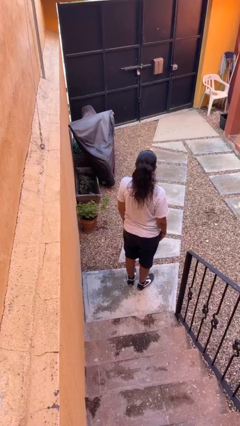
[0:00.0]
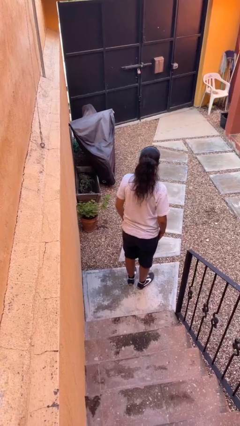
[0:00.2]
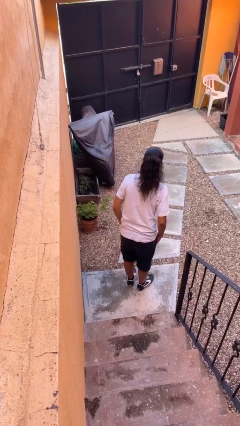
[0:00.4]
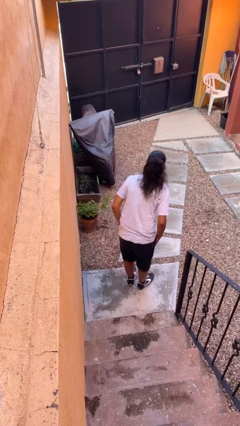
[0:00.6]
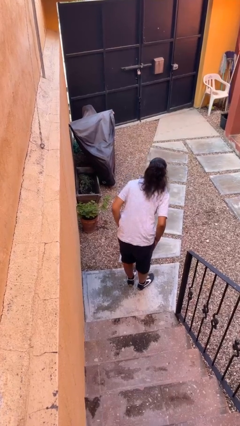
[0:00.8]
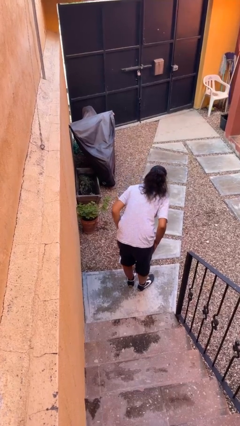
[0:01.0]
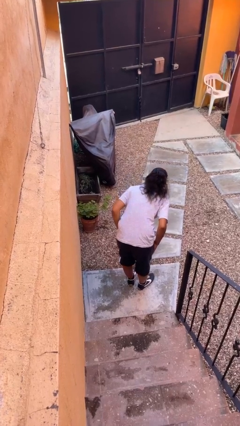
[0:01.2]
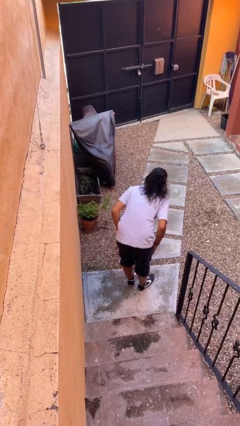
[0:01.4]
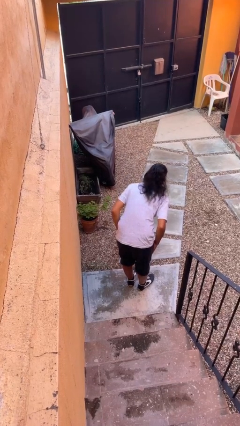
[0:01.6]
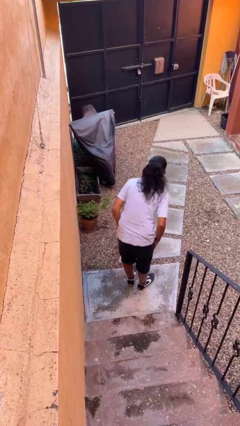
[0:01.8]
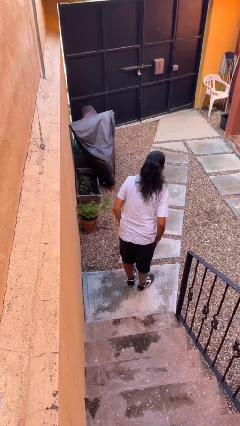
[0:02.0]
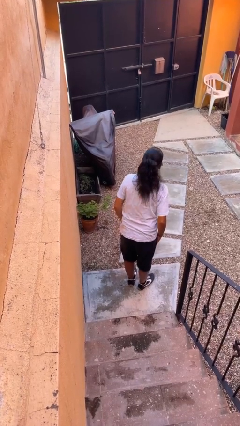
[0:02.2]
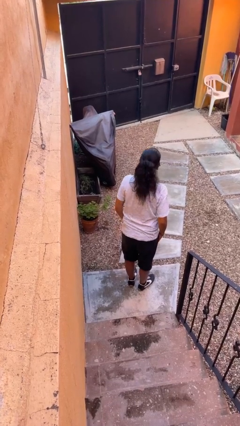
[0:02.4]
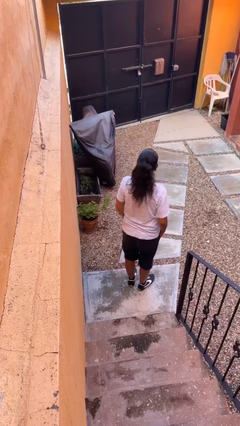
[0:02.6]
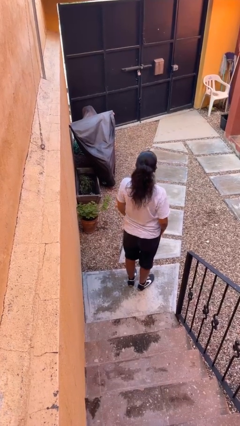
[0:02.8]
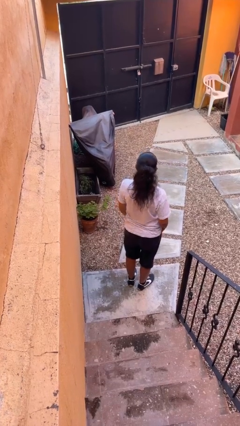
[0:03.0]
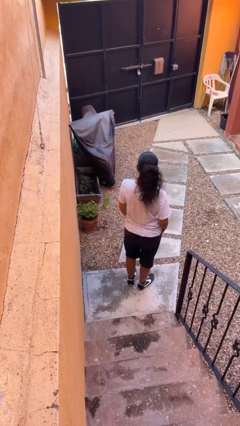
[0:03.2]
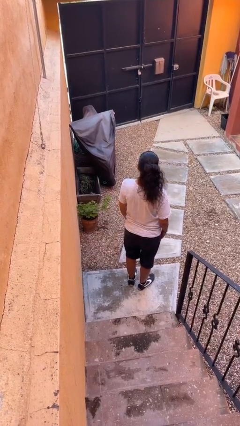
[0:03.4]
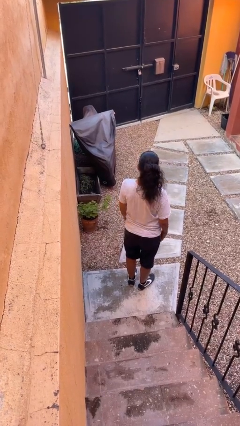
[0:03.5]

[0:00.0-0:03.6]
person bows

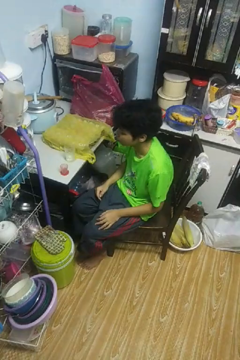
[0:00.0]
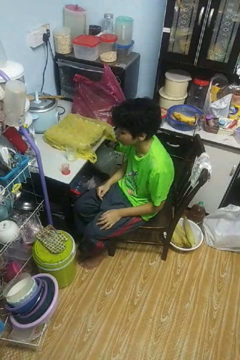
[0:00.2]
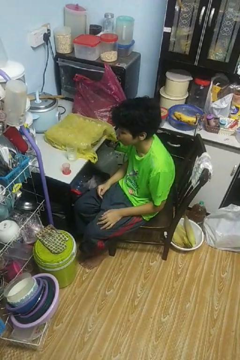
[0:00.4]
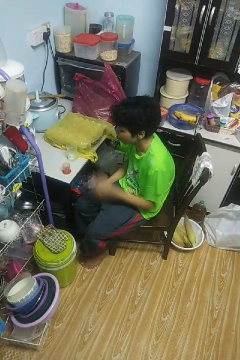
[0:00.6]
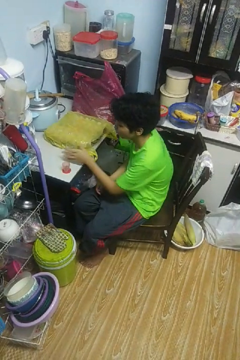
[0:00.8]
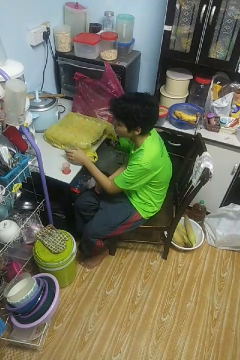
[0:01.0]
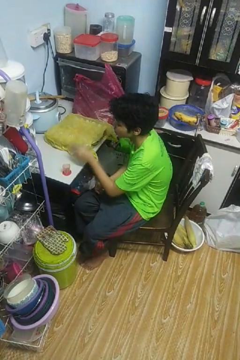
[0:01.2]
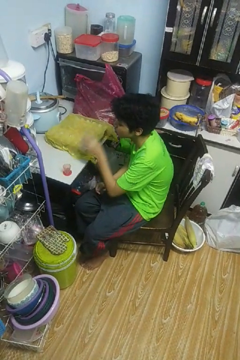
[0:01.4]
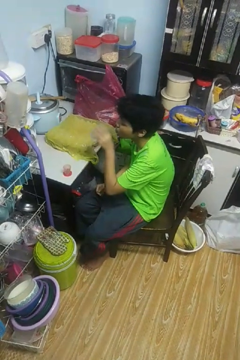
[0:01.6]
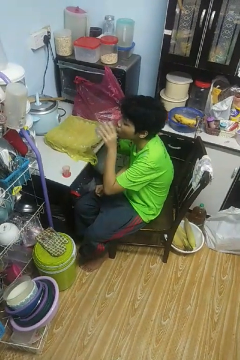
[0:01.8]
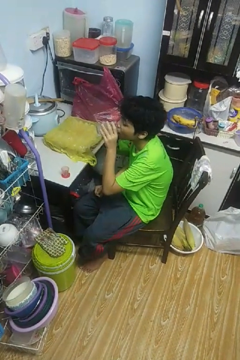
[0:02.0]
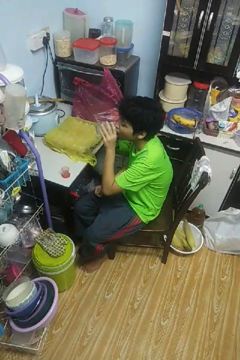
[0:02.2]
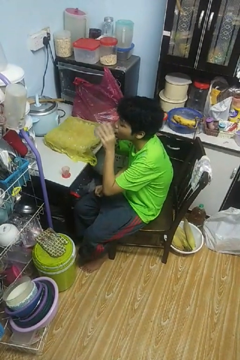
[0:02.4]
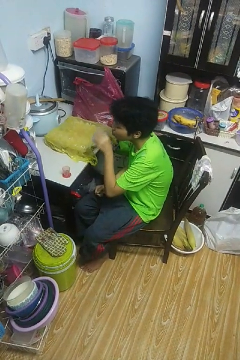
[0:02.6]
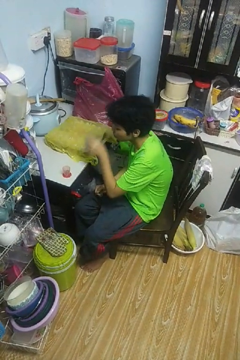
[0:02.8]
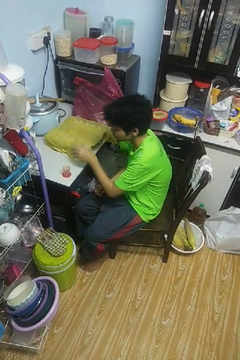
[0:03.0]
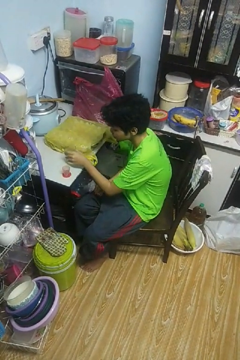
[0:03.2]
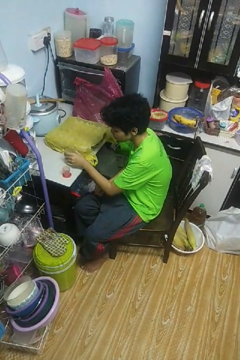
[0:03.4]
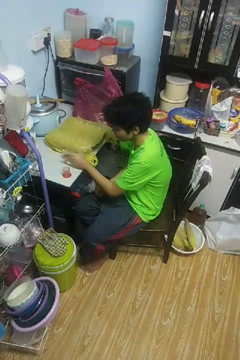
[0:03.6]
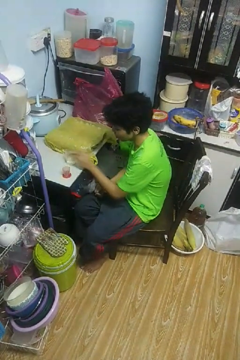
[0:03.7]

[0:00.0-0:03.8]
person drinks from cup

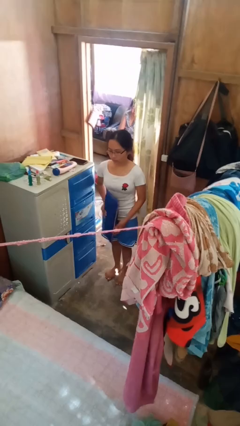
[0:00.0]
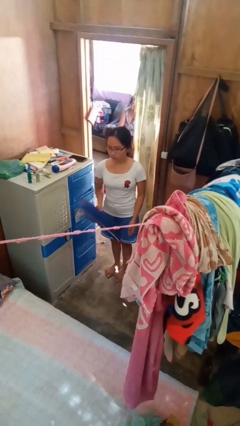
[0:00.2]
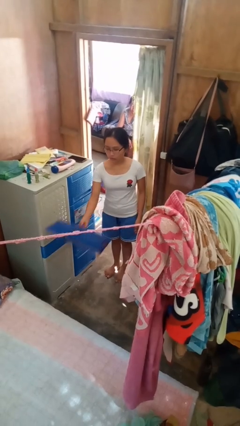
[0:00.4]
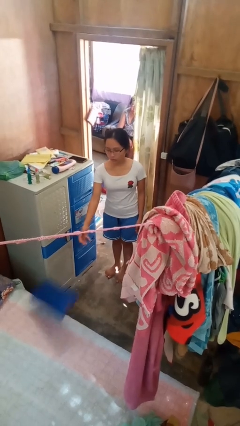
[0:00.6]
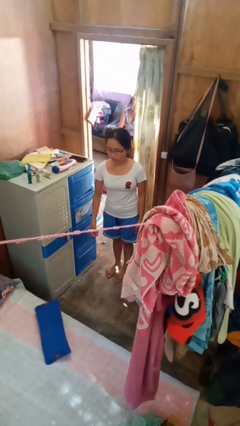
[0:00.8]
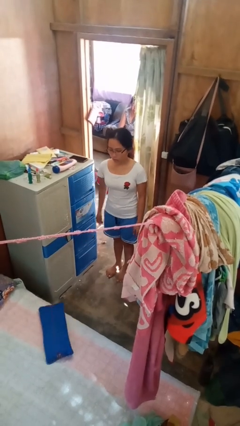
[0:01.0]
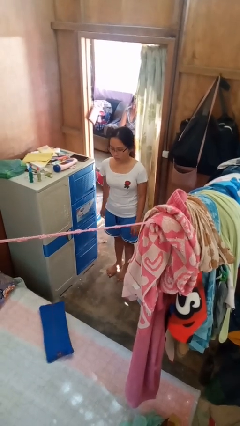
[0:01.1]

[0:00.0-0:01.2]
person throws object on bed

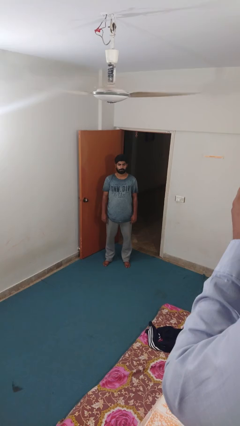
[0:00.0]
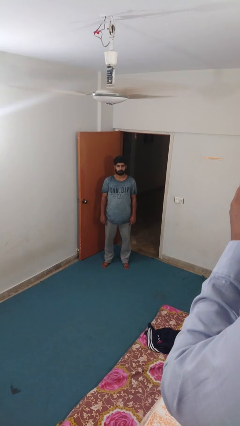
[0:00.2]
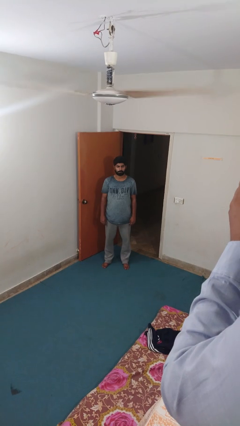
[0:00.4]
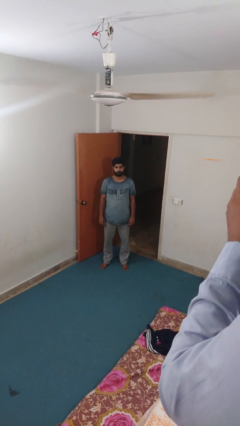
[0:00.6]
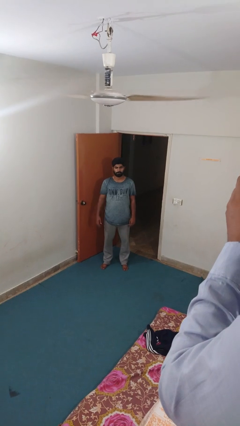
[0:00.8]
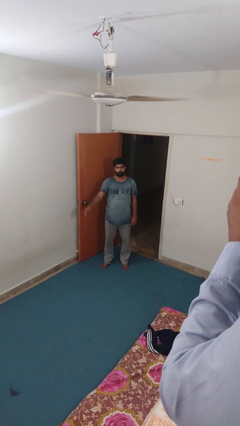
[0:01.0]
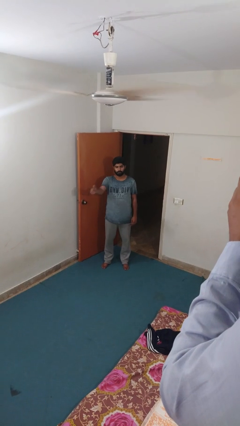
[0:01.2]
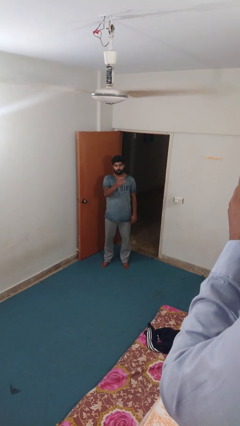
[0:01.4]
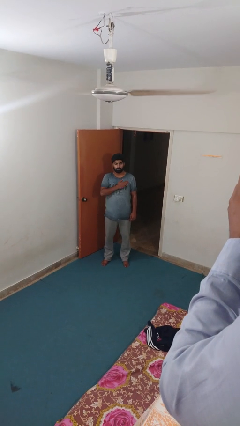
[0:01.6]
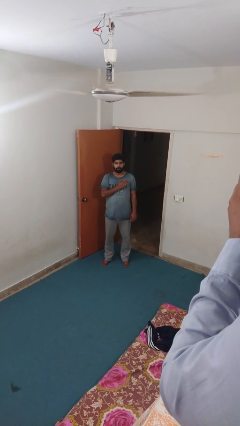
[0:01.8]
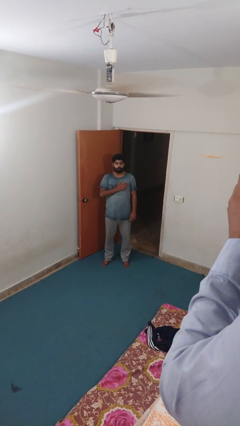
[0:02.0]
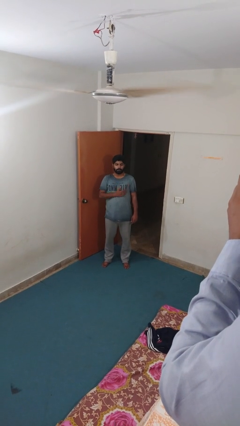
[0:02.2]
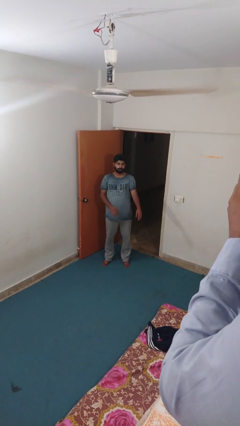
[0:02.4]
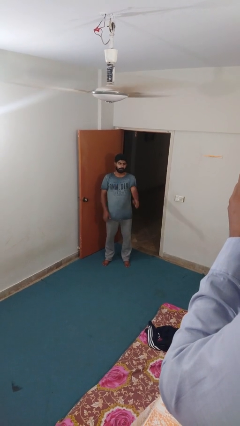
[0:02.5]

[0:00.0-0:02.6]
person drums on chest

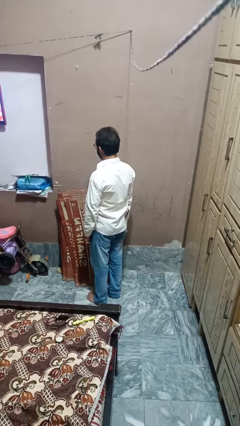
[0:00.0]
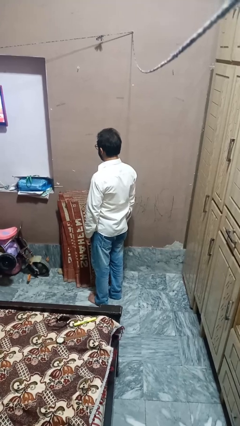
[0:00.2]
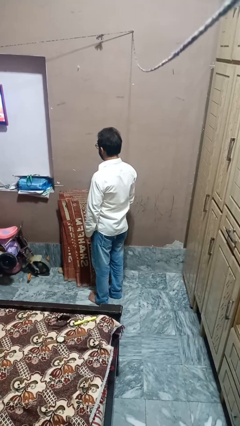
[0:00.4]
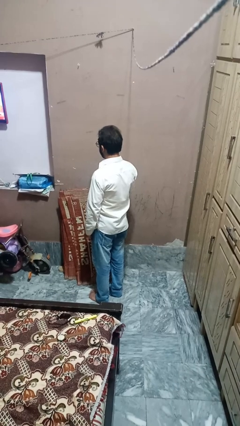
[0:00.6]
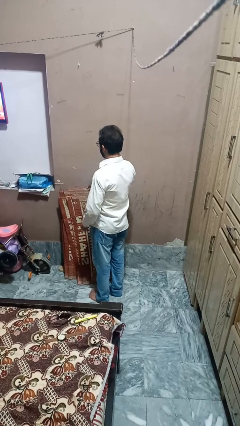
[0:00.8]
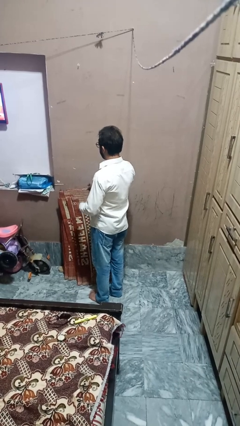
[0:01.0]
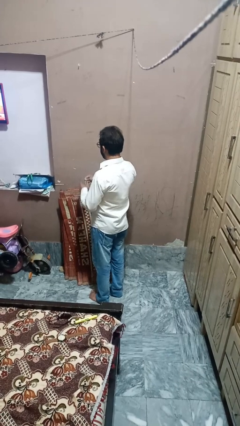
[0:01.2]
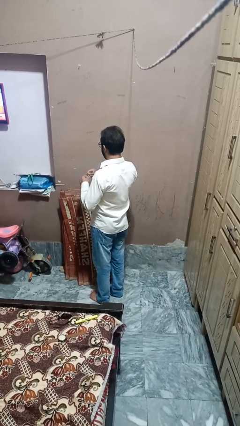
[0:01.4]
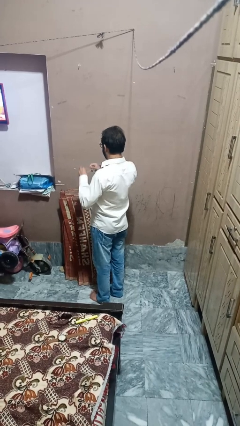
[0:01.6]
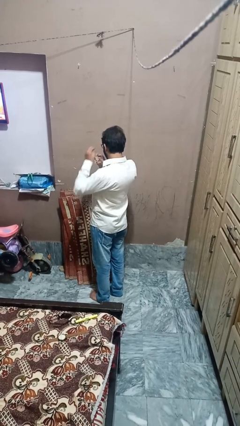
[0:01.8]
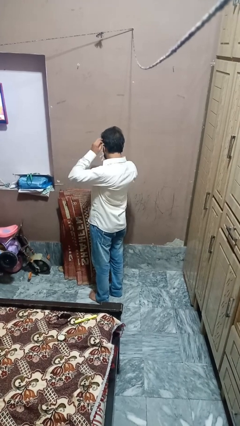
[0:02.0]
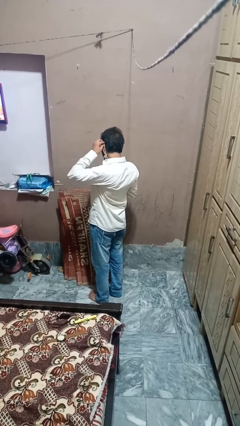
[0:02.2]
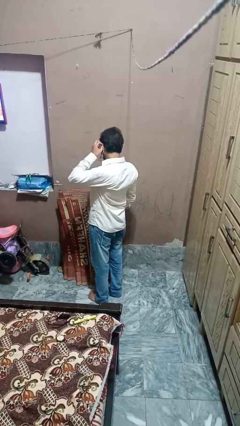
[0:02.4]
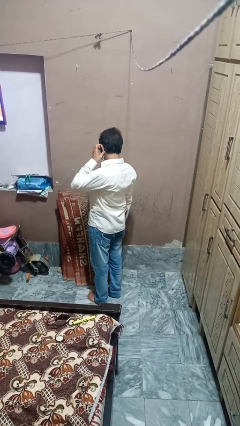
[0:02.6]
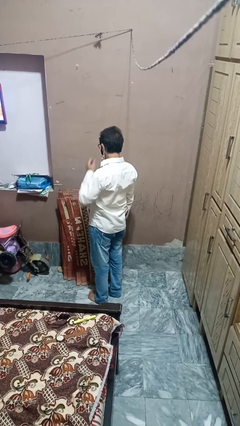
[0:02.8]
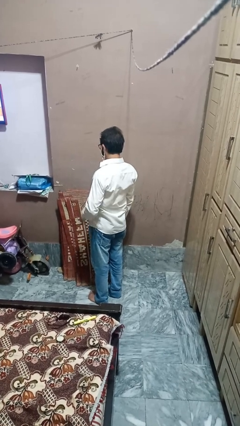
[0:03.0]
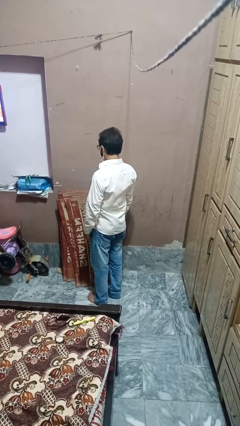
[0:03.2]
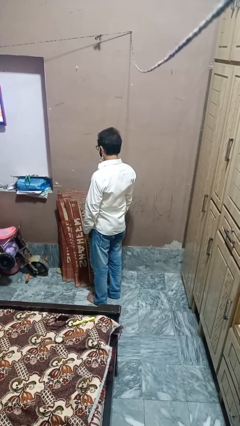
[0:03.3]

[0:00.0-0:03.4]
person puts on earrings

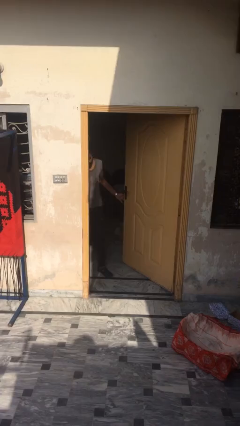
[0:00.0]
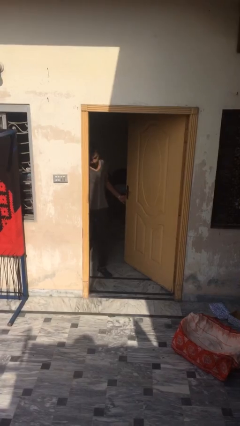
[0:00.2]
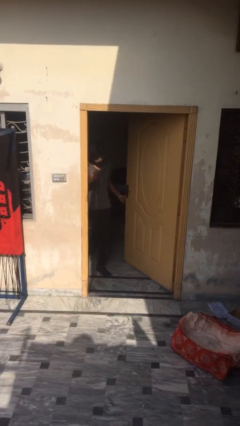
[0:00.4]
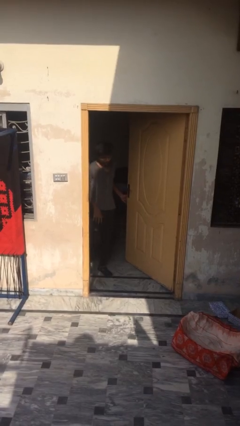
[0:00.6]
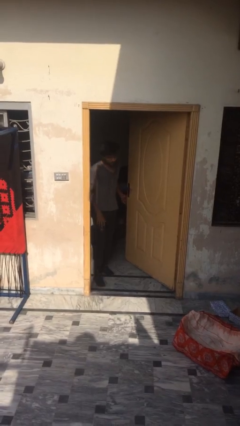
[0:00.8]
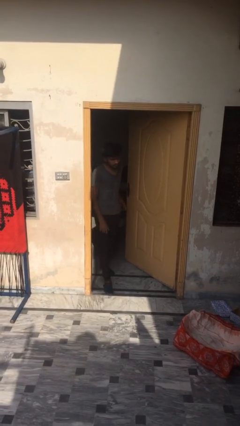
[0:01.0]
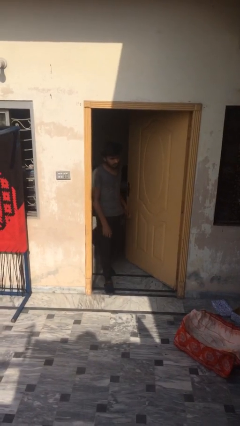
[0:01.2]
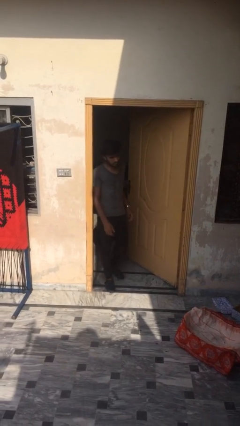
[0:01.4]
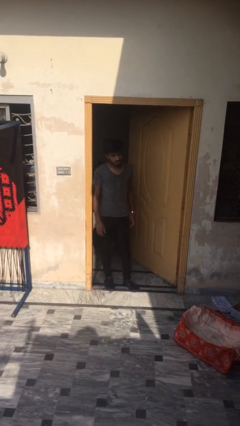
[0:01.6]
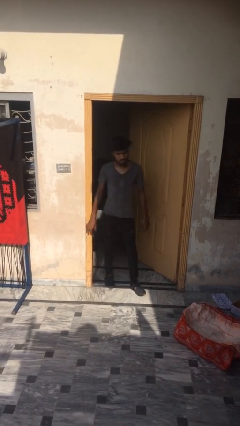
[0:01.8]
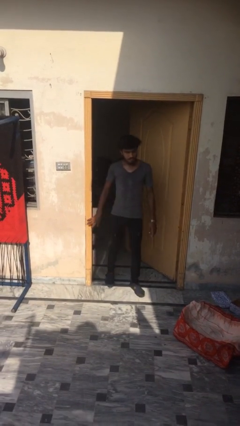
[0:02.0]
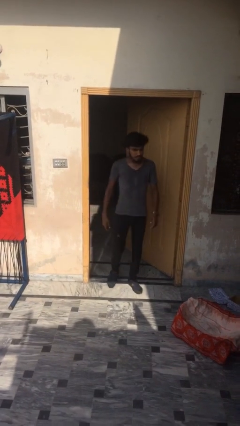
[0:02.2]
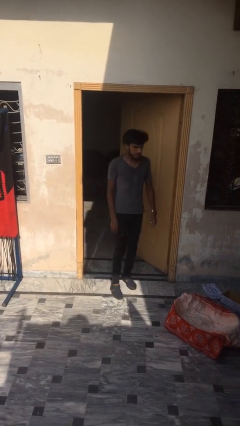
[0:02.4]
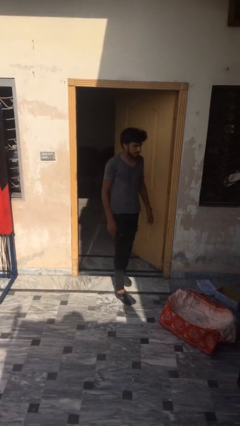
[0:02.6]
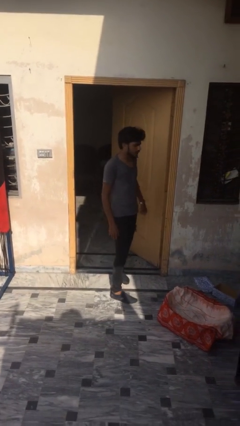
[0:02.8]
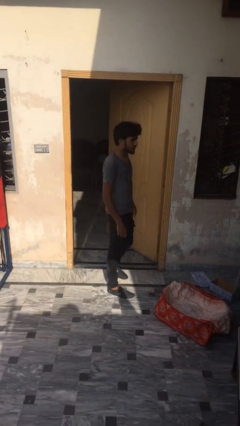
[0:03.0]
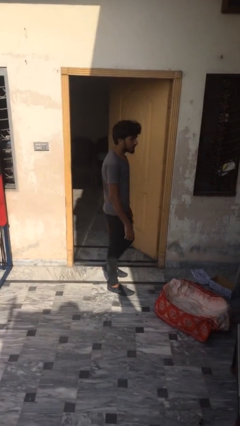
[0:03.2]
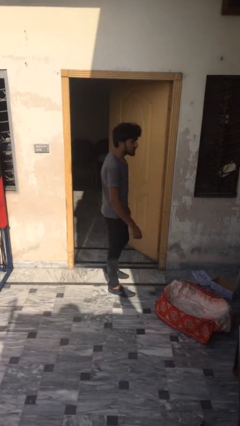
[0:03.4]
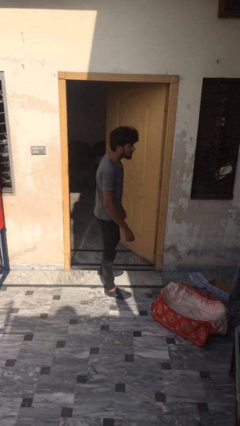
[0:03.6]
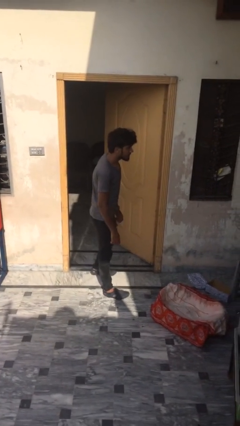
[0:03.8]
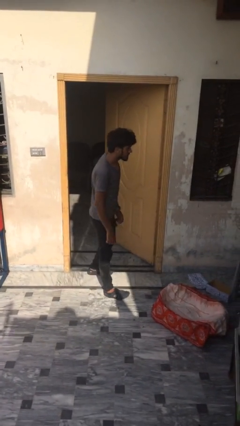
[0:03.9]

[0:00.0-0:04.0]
person enters scene through structure
